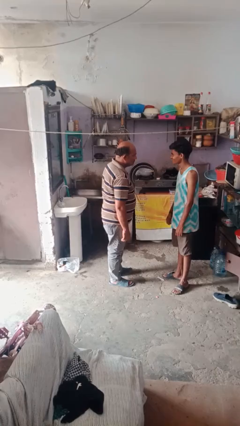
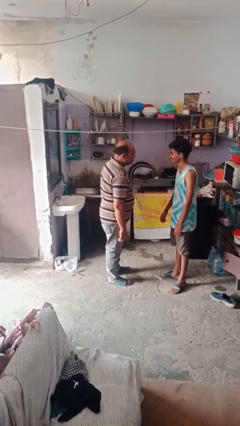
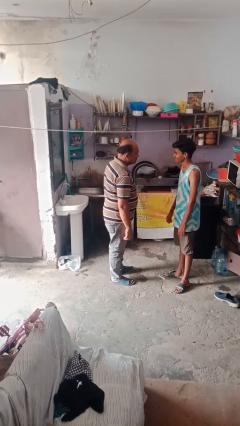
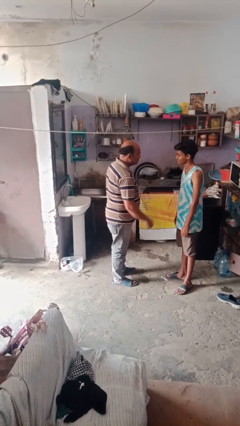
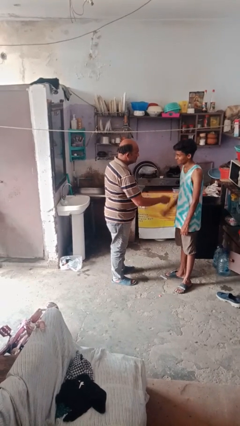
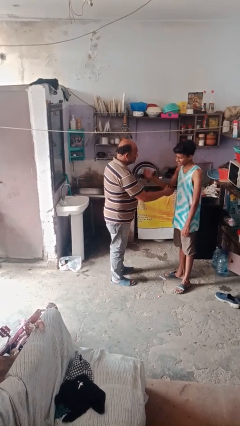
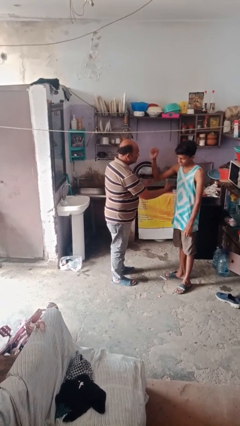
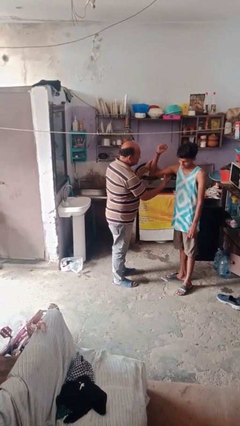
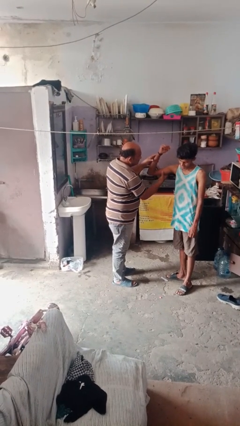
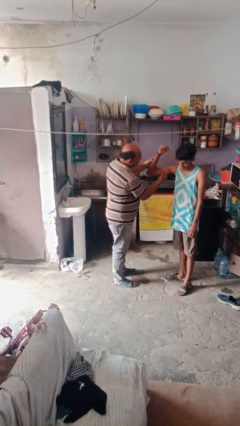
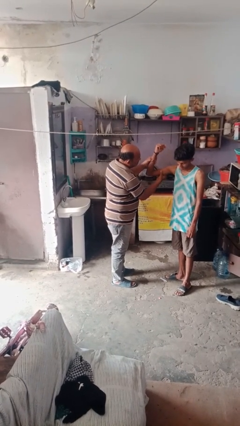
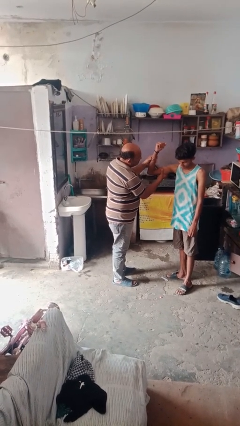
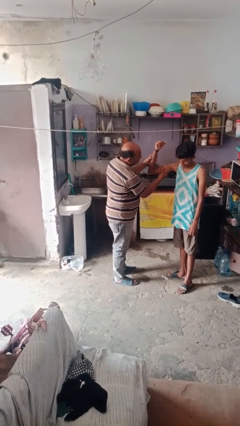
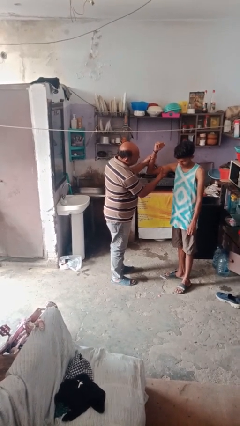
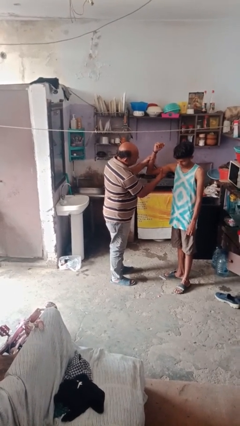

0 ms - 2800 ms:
person grabs person by bicep

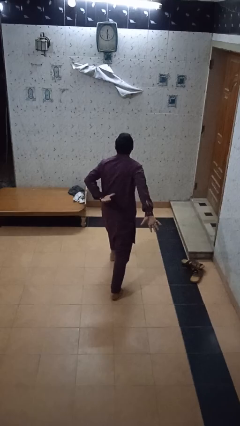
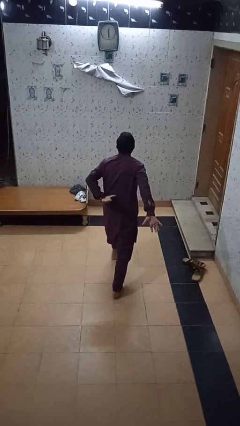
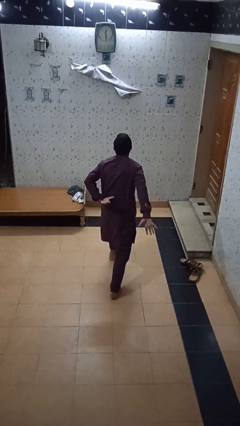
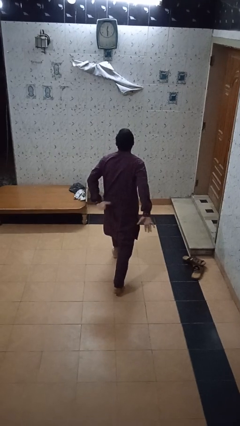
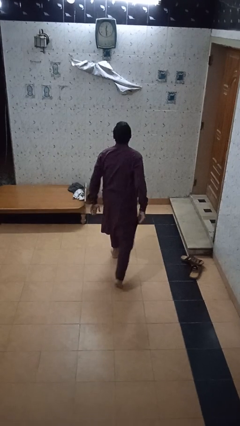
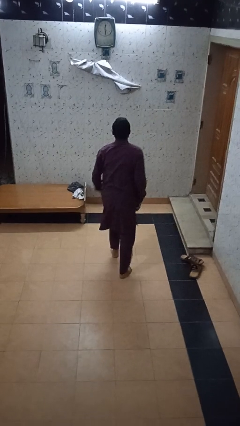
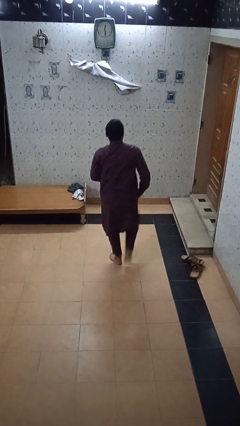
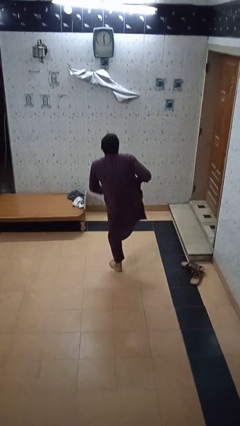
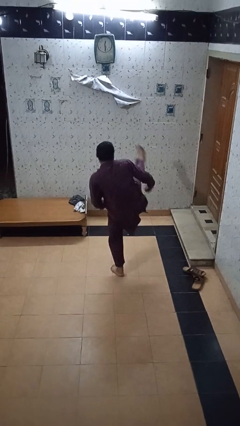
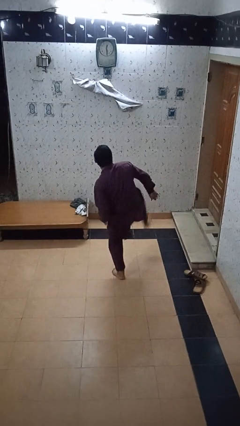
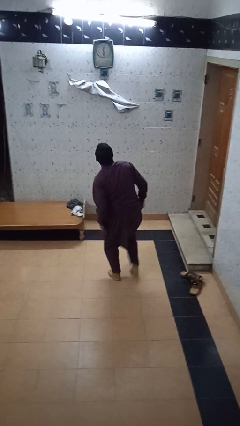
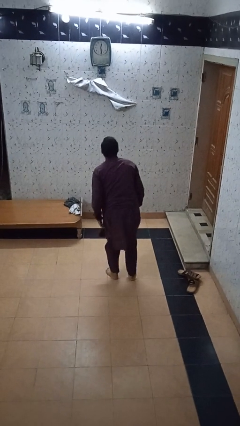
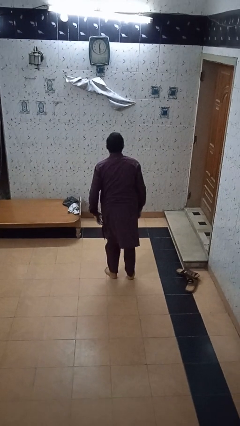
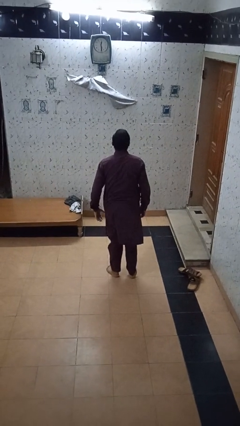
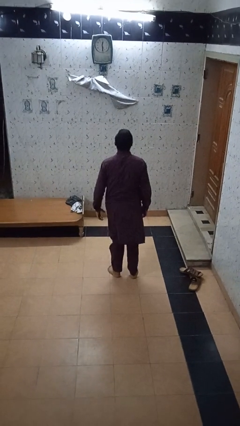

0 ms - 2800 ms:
person karate kicks

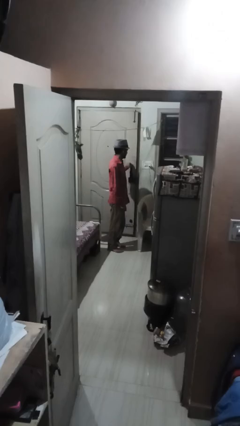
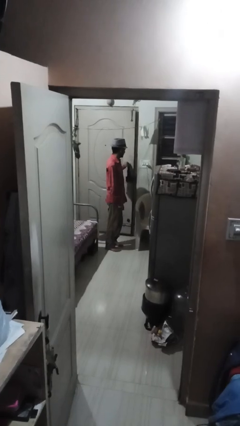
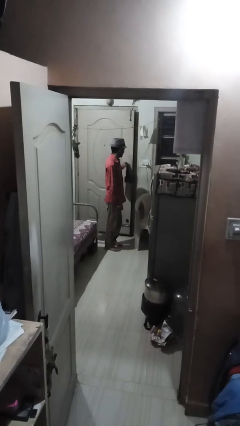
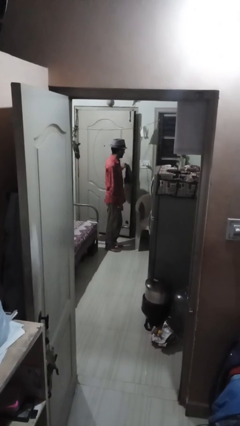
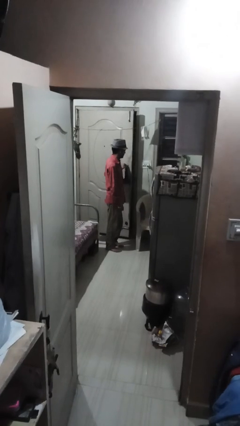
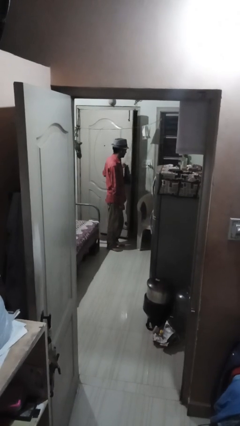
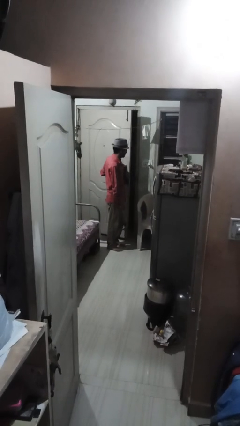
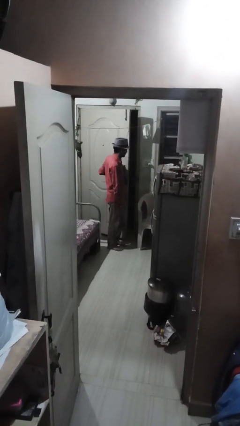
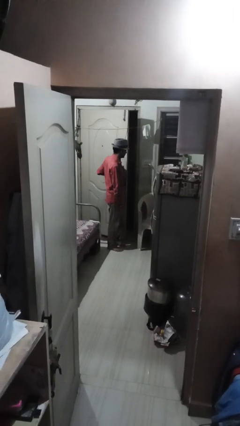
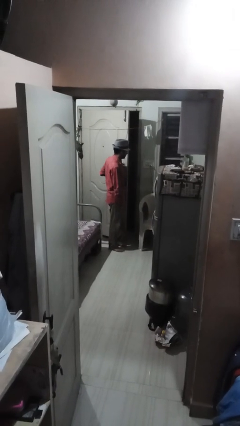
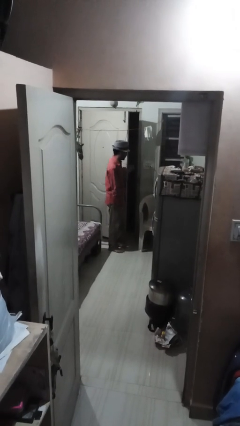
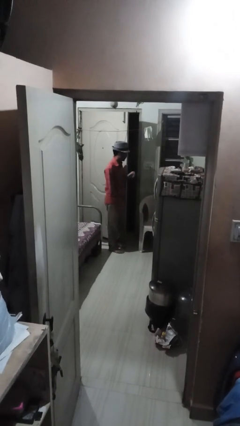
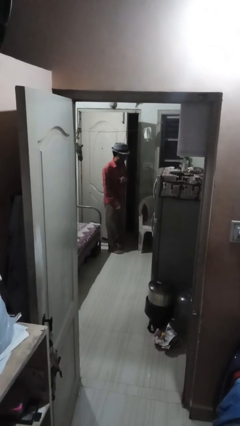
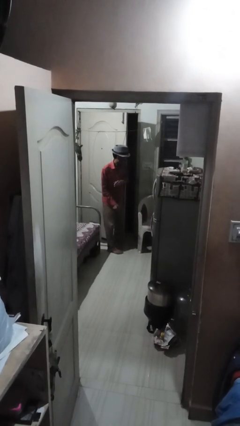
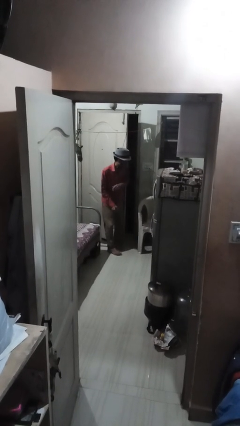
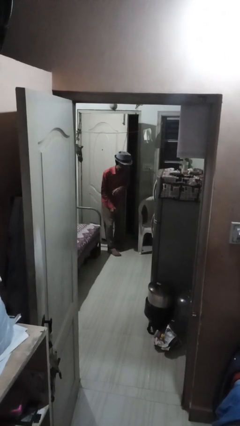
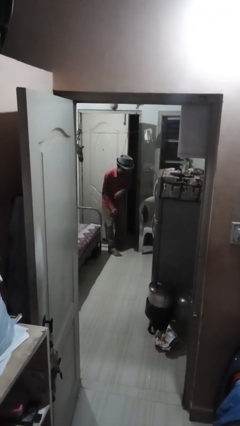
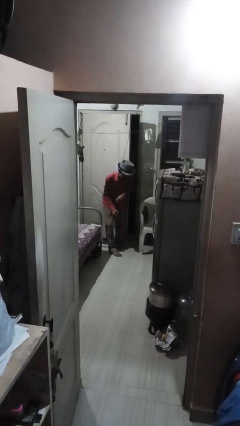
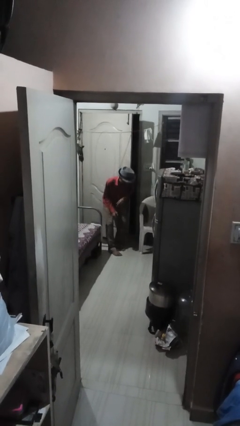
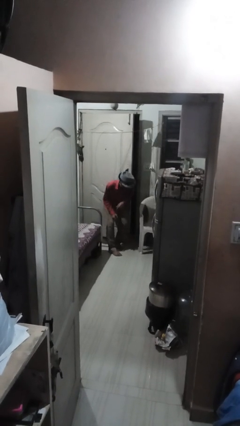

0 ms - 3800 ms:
person opens facility door

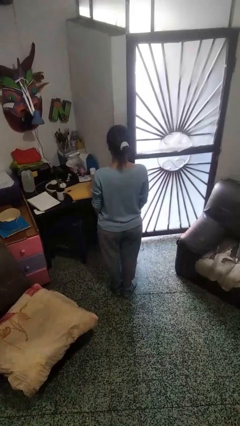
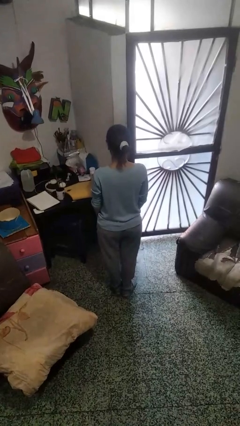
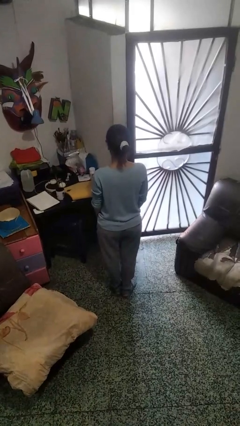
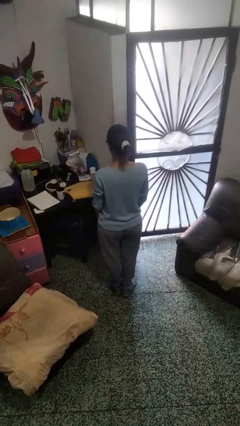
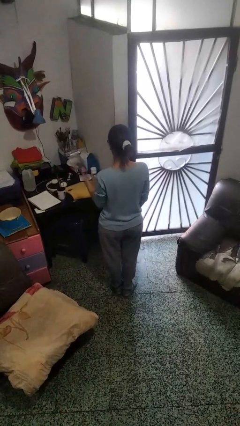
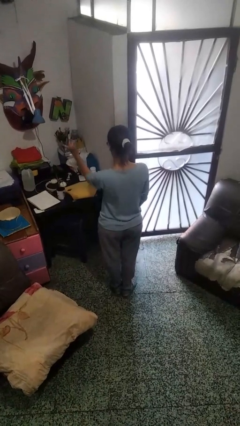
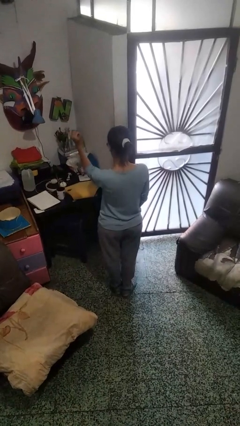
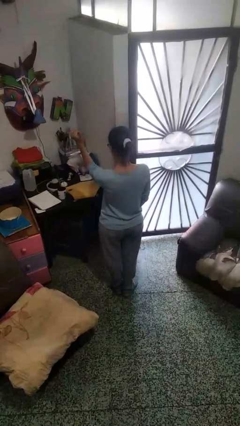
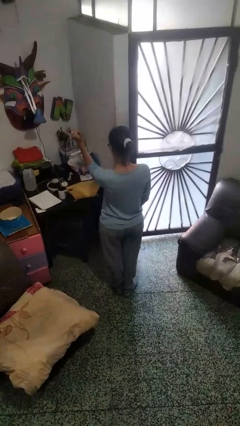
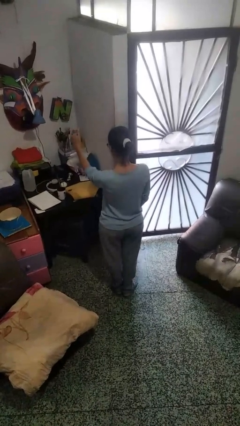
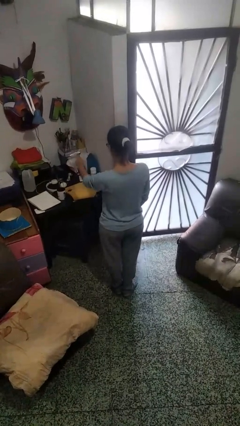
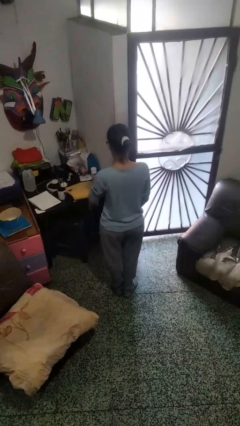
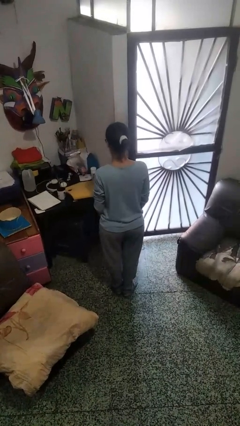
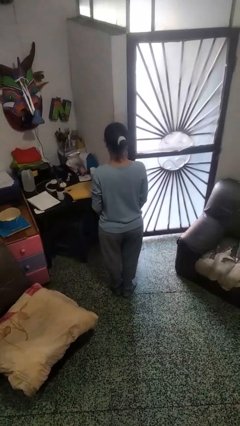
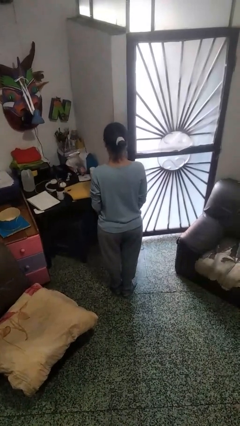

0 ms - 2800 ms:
person gestures hang loose

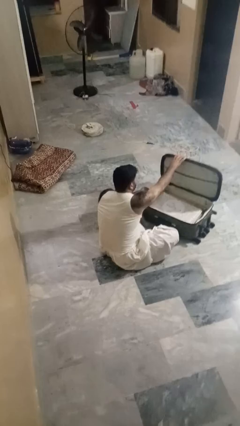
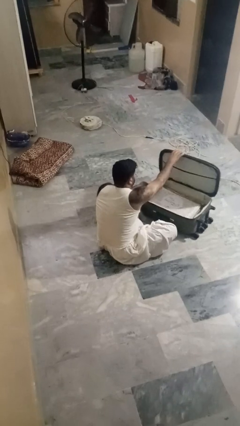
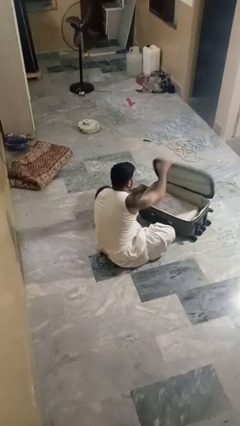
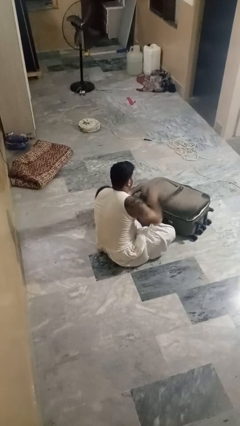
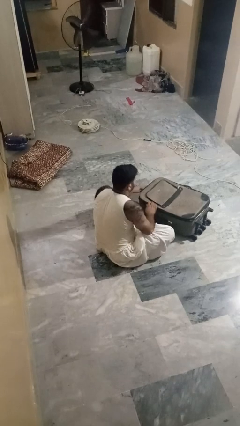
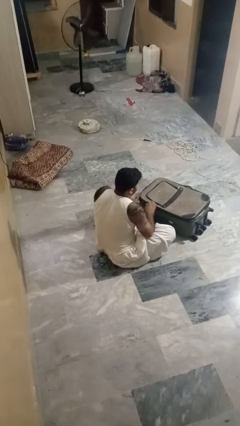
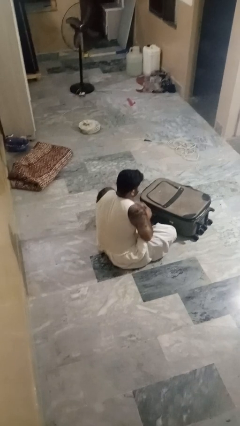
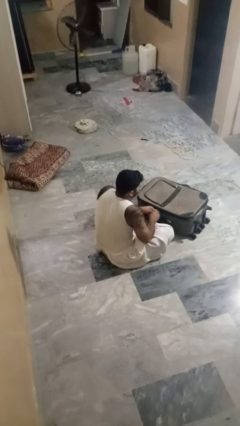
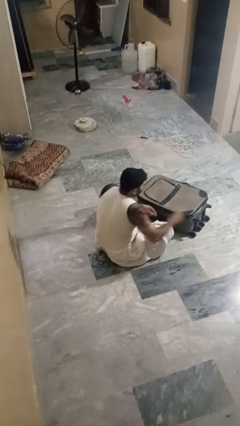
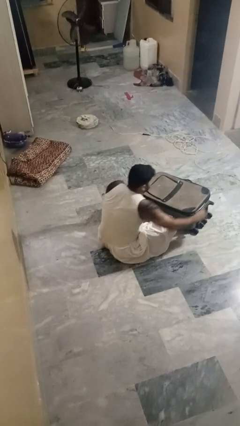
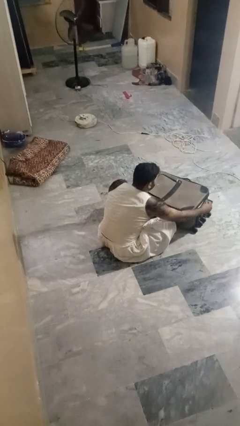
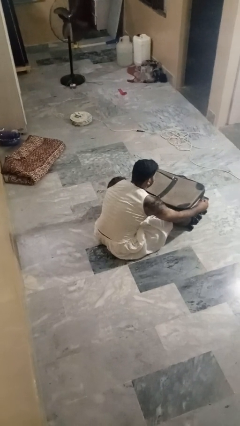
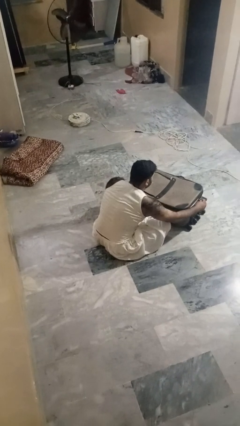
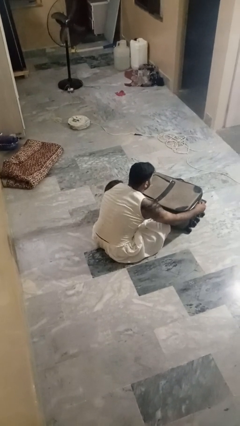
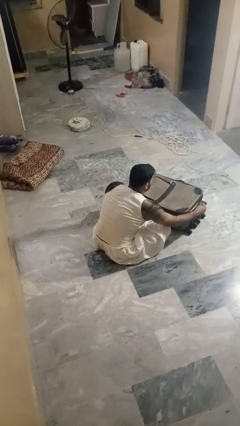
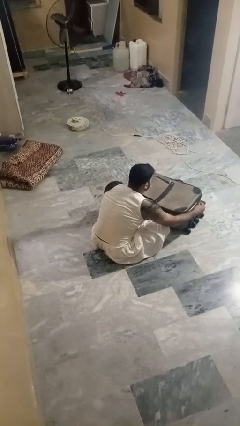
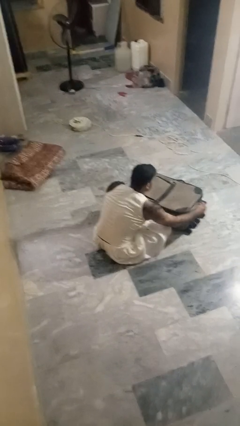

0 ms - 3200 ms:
person closes suitcase

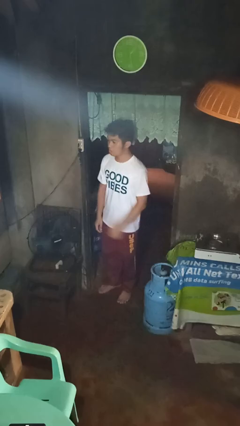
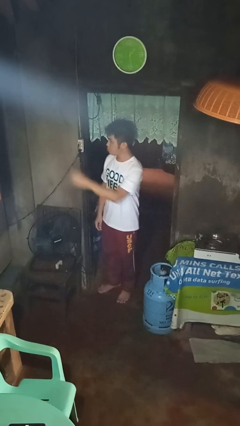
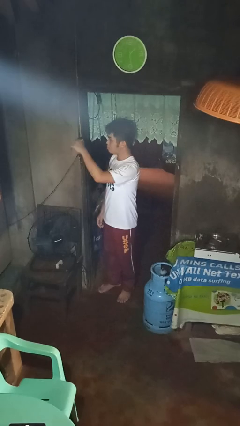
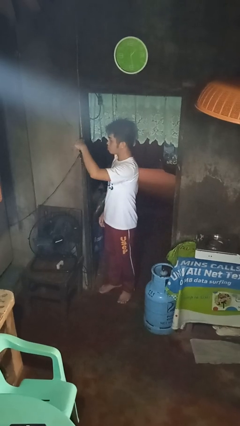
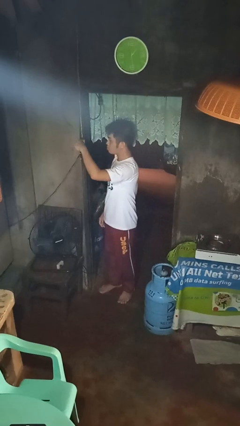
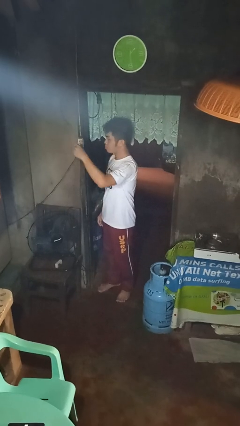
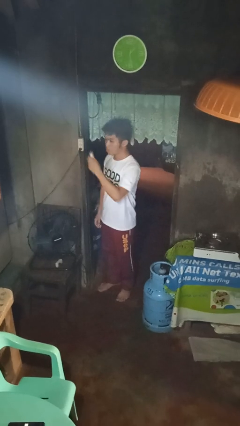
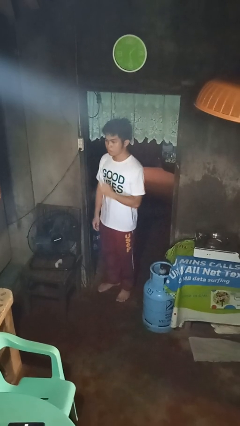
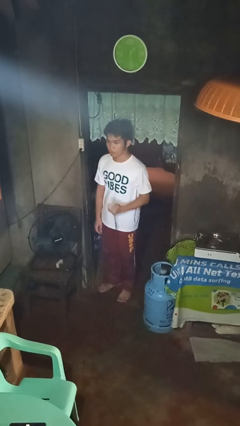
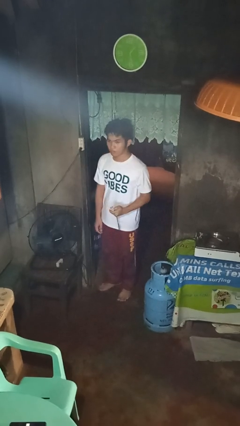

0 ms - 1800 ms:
person unplugs from electrical socket
